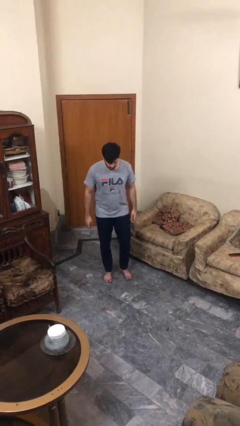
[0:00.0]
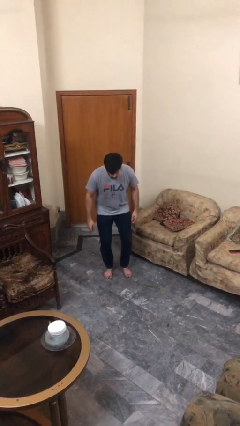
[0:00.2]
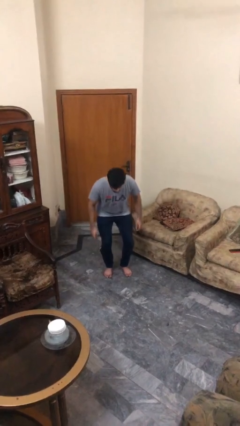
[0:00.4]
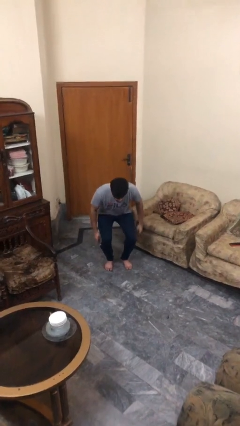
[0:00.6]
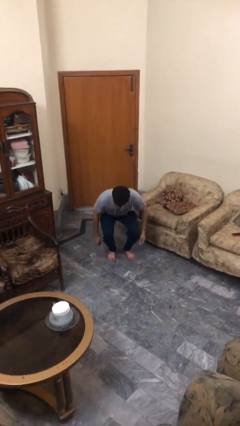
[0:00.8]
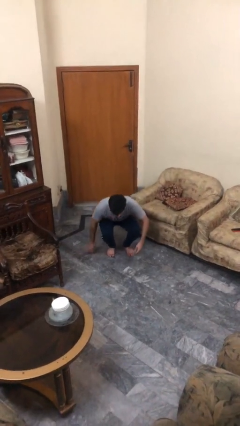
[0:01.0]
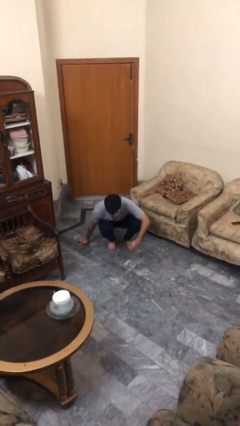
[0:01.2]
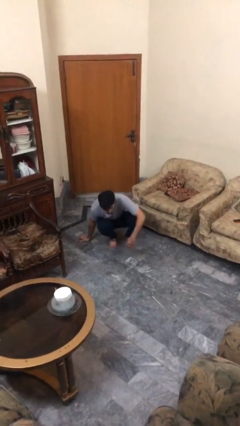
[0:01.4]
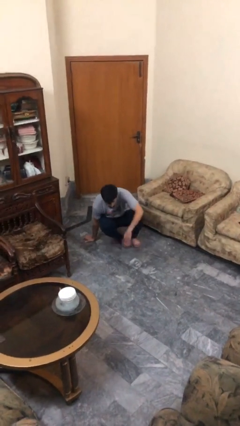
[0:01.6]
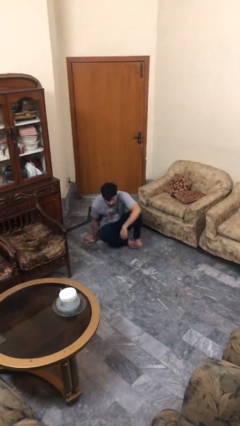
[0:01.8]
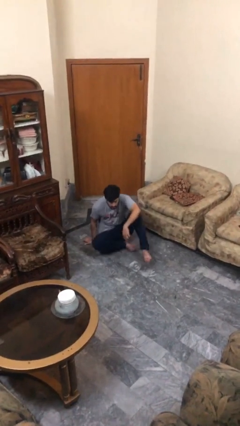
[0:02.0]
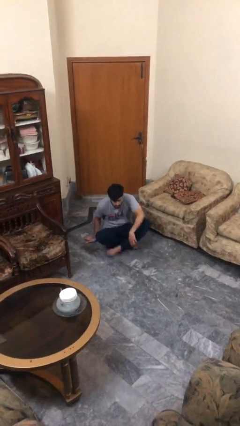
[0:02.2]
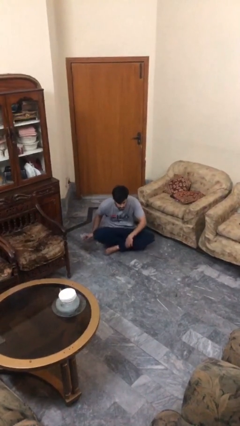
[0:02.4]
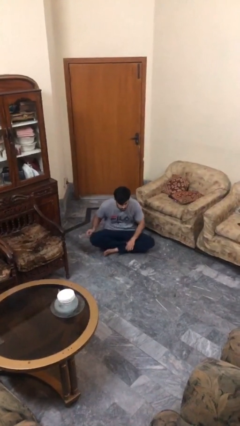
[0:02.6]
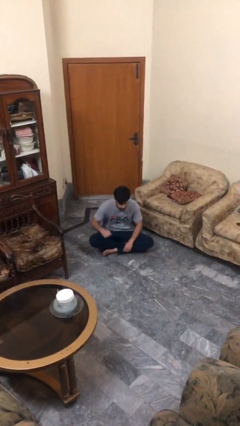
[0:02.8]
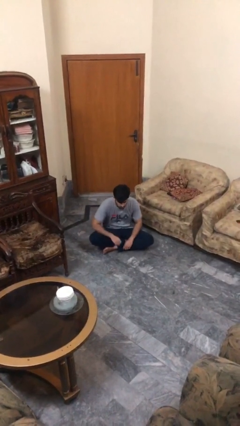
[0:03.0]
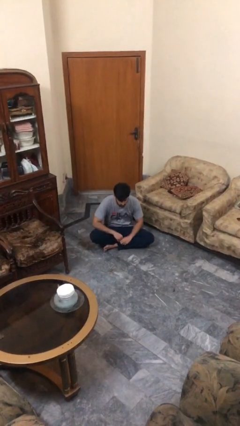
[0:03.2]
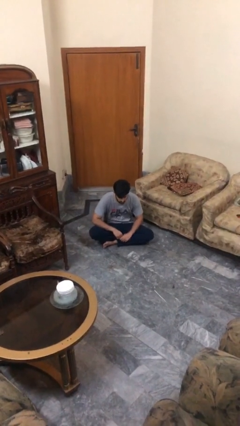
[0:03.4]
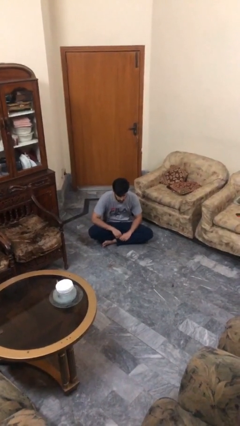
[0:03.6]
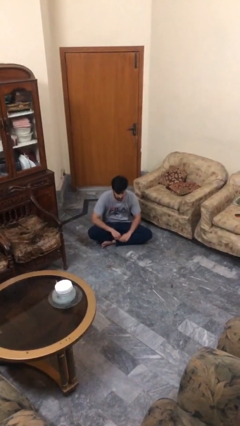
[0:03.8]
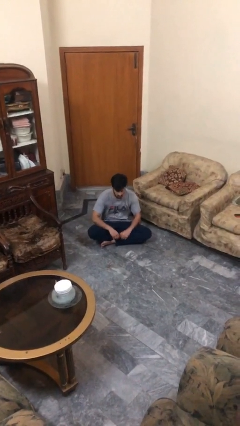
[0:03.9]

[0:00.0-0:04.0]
person sits crisscross

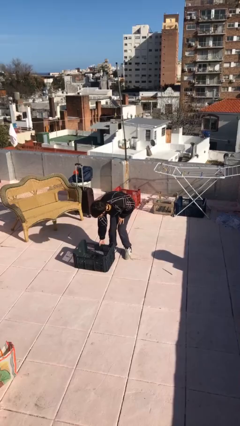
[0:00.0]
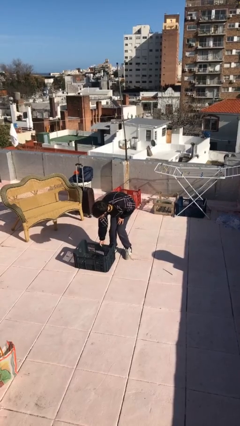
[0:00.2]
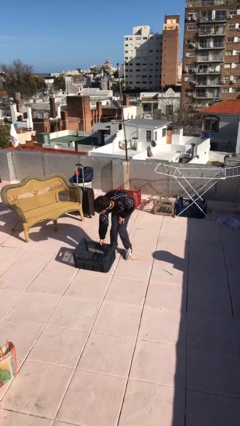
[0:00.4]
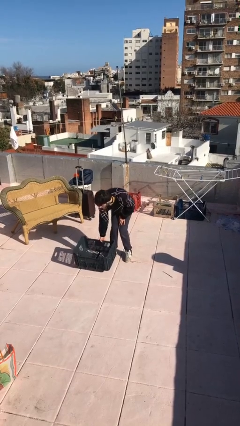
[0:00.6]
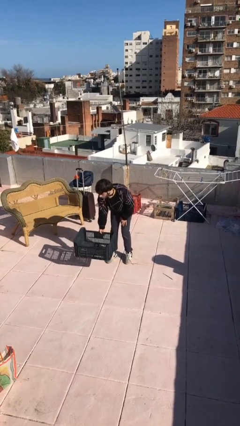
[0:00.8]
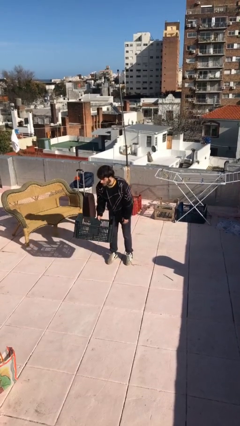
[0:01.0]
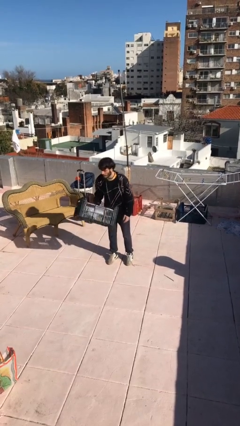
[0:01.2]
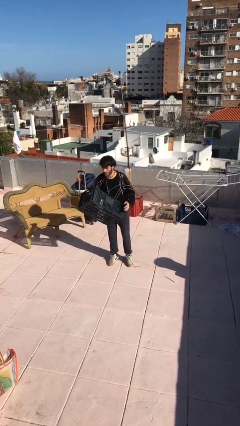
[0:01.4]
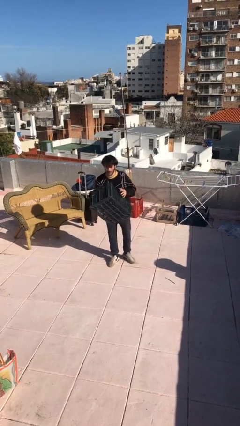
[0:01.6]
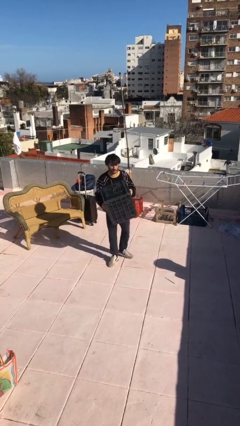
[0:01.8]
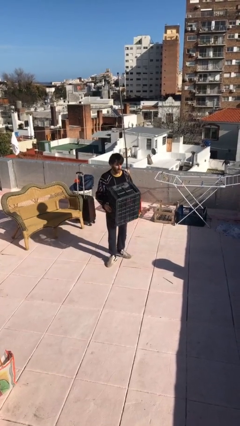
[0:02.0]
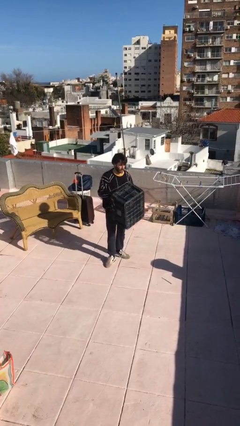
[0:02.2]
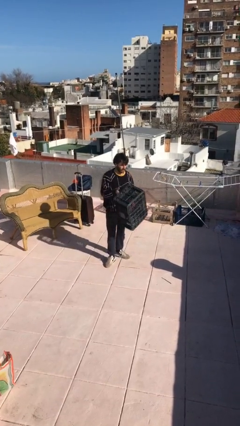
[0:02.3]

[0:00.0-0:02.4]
person picks up object from floor

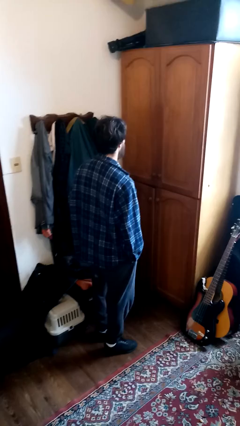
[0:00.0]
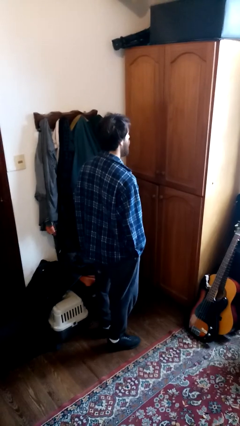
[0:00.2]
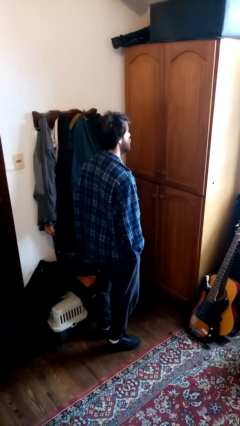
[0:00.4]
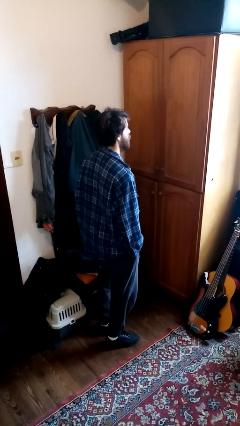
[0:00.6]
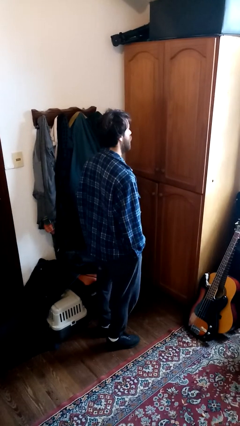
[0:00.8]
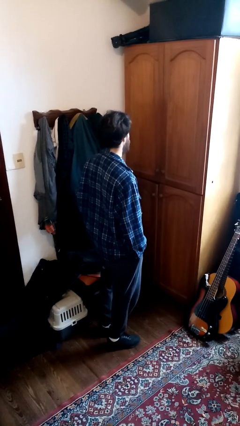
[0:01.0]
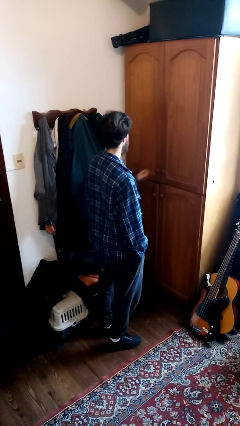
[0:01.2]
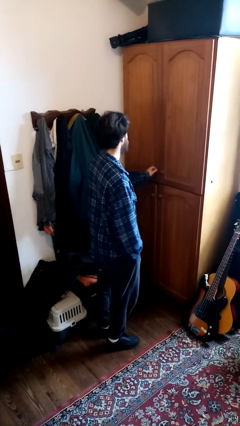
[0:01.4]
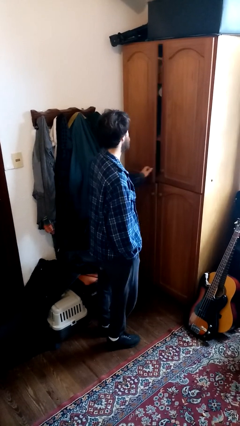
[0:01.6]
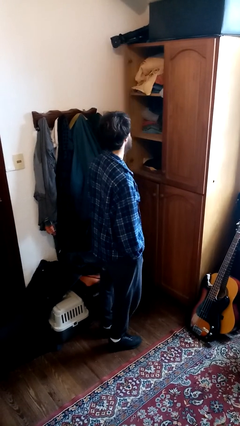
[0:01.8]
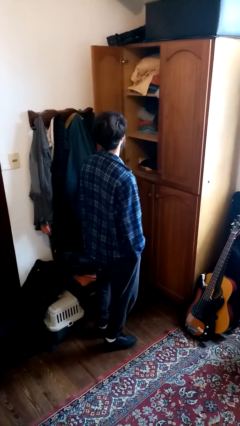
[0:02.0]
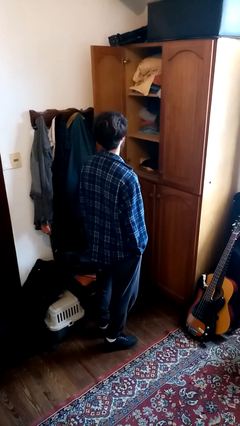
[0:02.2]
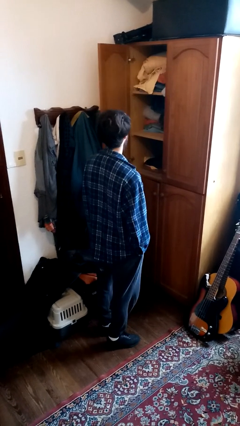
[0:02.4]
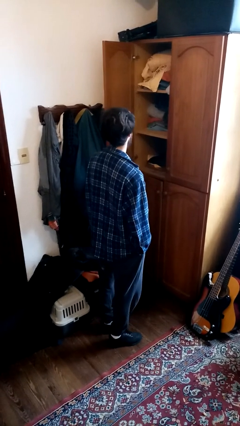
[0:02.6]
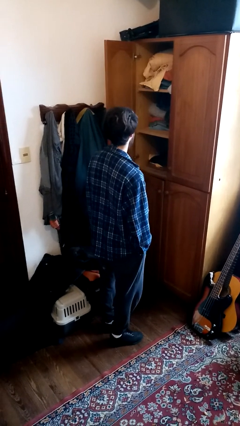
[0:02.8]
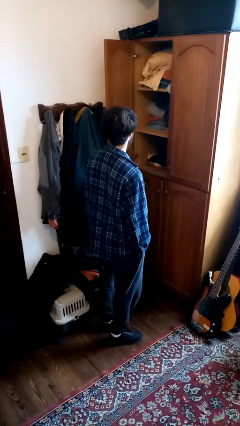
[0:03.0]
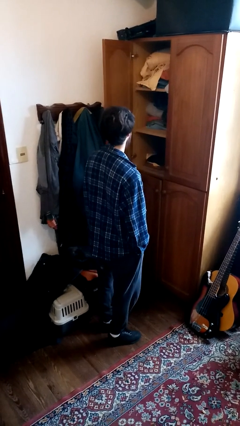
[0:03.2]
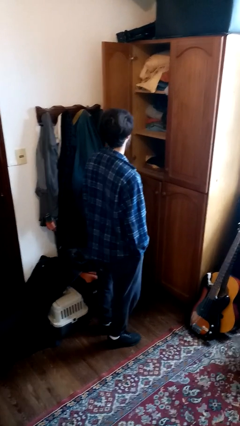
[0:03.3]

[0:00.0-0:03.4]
person opens dresser drawer

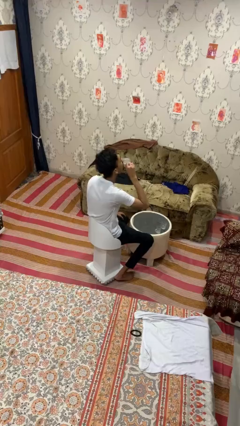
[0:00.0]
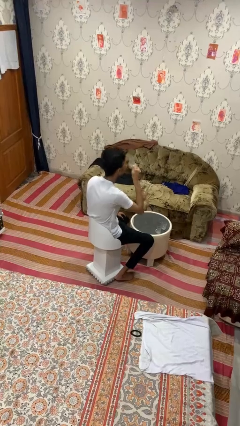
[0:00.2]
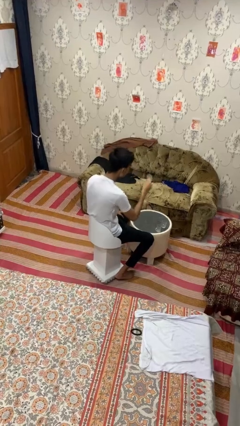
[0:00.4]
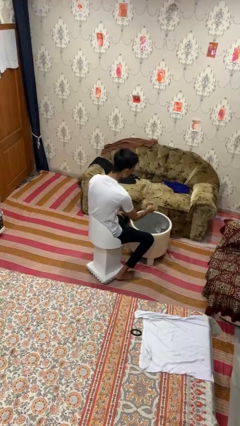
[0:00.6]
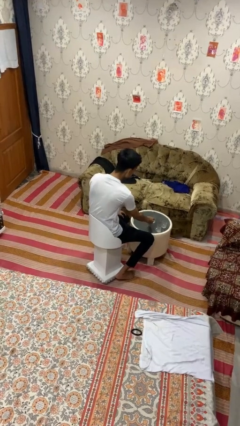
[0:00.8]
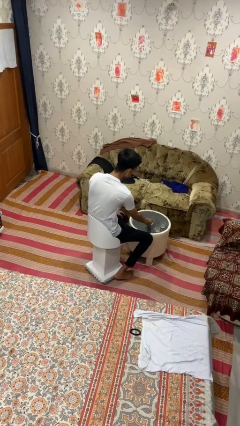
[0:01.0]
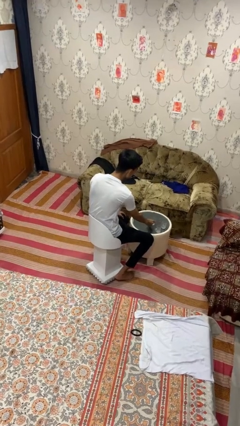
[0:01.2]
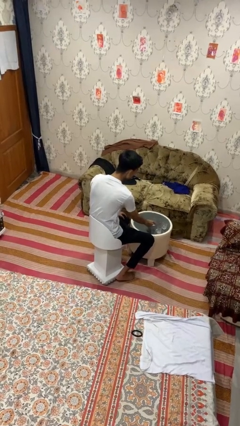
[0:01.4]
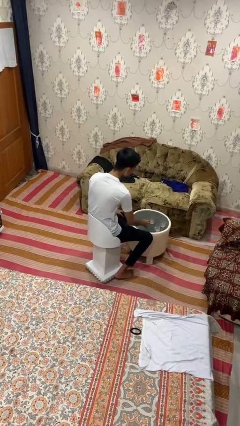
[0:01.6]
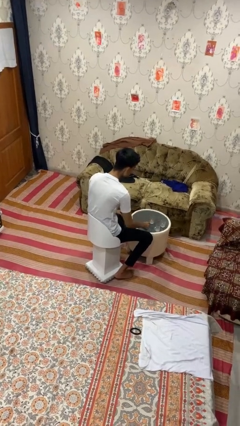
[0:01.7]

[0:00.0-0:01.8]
person puts down object on table

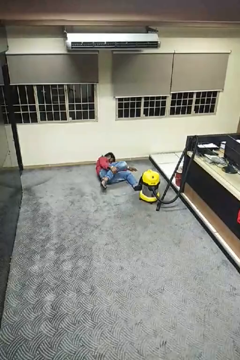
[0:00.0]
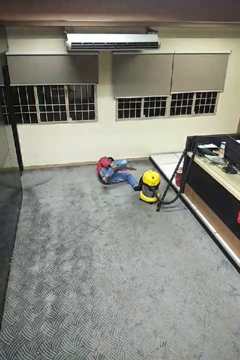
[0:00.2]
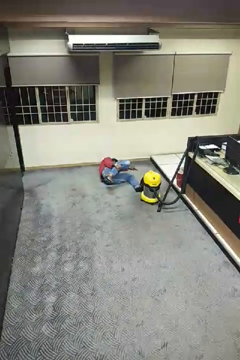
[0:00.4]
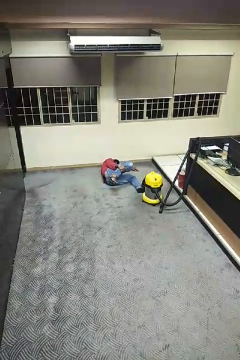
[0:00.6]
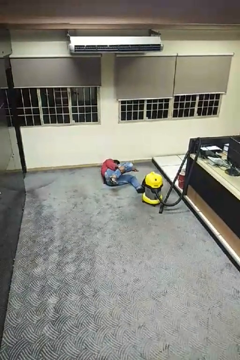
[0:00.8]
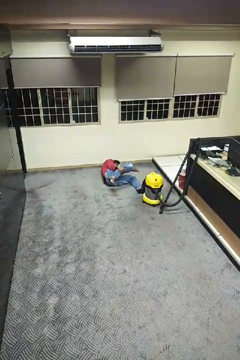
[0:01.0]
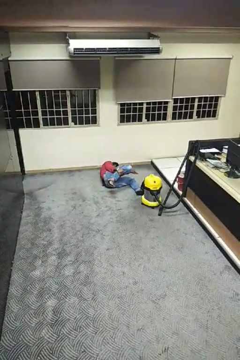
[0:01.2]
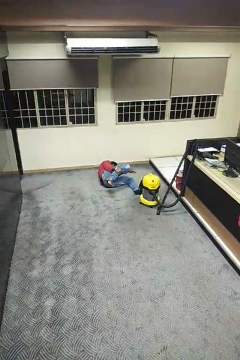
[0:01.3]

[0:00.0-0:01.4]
person lies down on floor

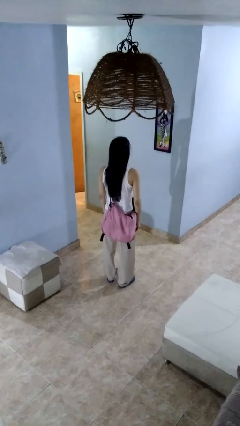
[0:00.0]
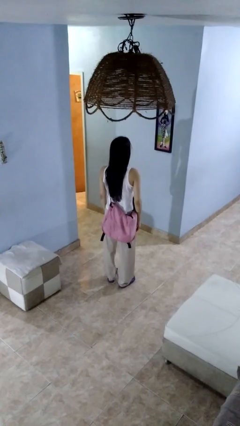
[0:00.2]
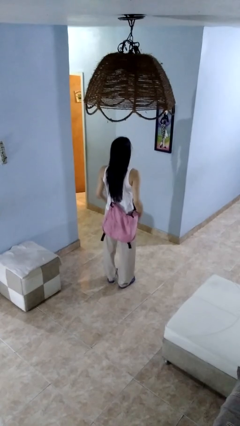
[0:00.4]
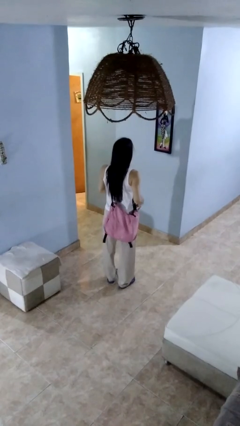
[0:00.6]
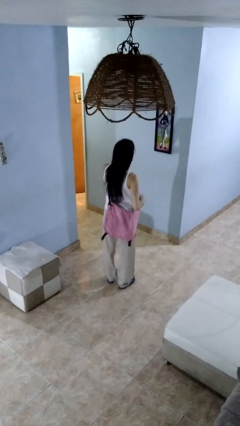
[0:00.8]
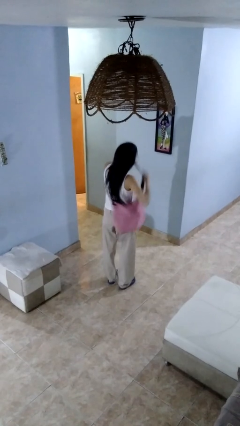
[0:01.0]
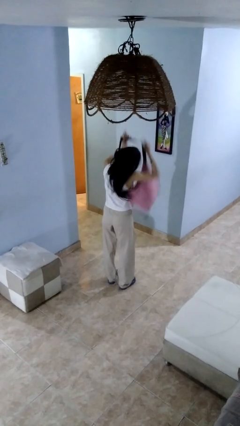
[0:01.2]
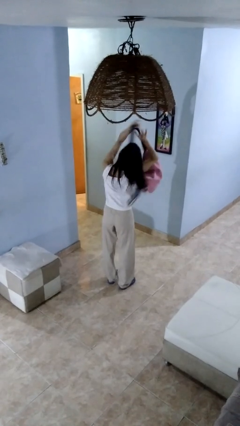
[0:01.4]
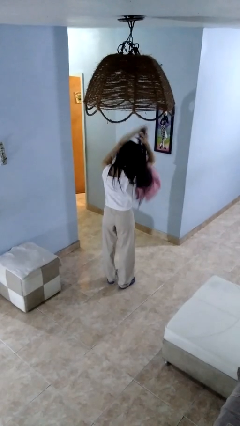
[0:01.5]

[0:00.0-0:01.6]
person takes off backpack

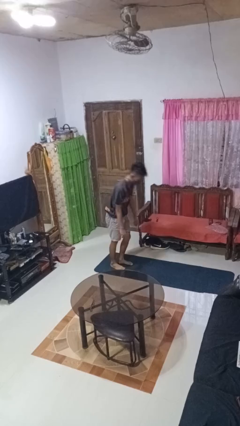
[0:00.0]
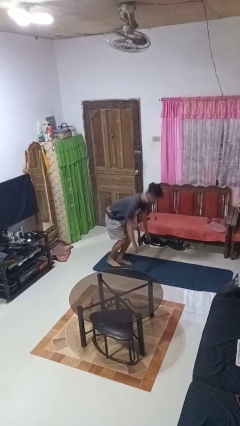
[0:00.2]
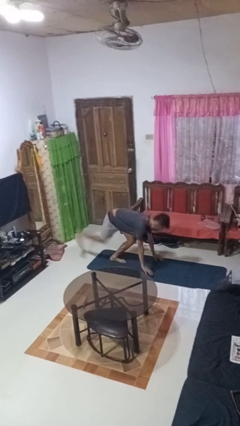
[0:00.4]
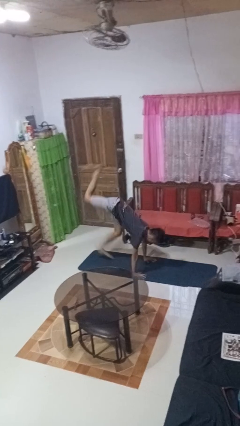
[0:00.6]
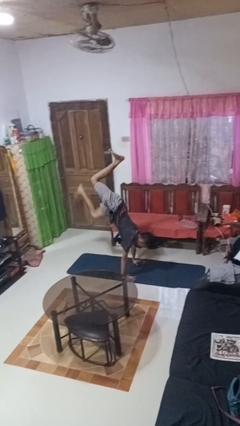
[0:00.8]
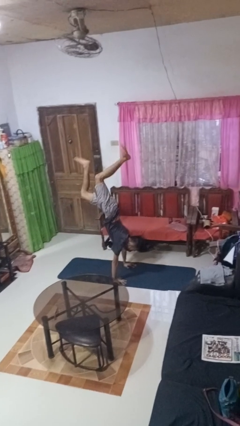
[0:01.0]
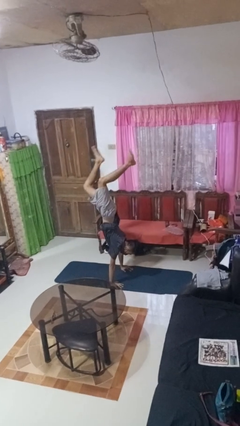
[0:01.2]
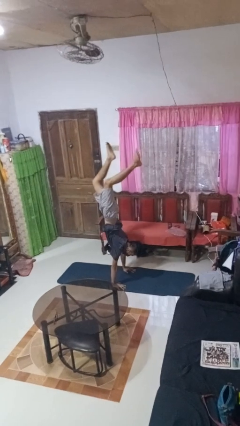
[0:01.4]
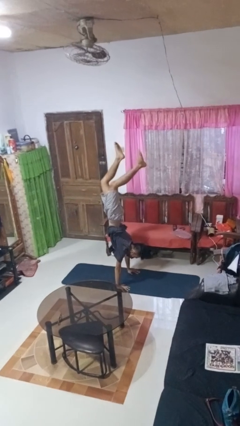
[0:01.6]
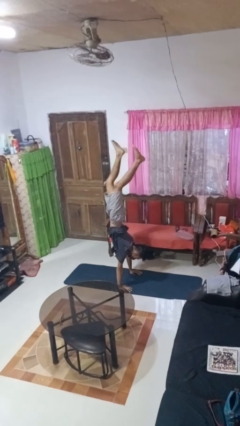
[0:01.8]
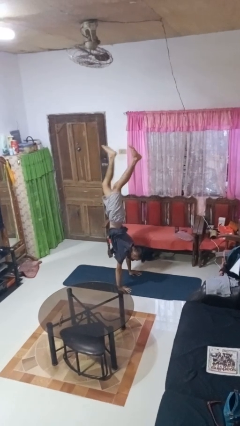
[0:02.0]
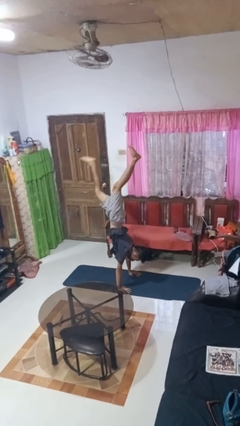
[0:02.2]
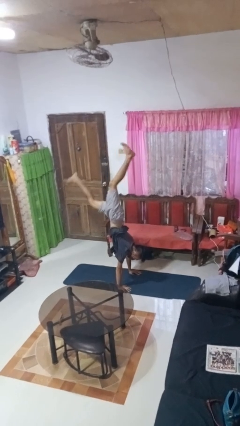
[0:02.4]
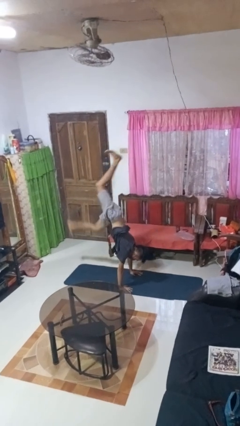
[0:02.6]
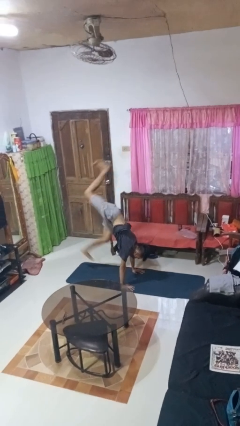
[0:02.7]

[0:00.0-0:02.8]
person handstand
